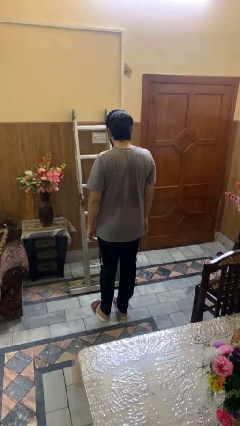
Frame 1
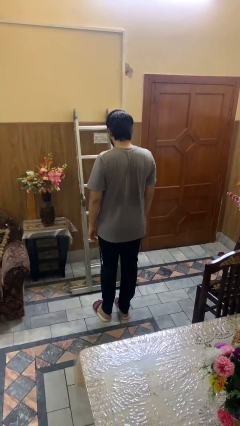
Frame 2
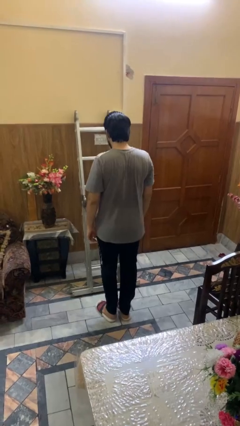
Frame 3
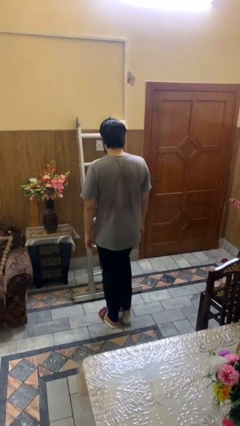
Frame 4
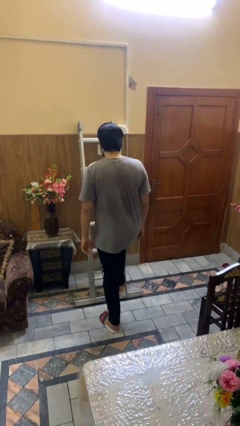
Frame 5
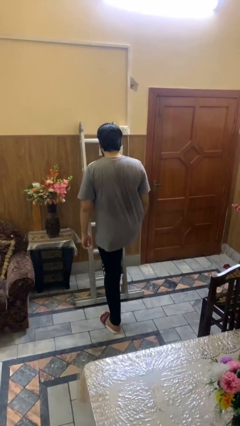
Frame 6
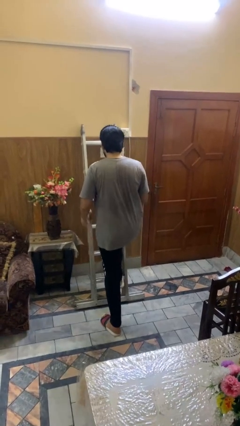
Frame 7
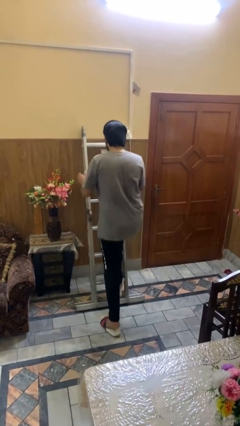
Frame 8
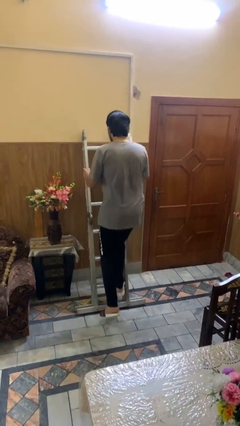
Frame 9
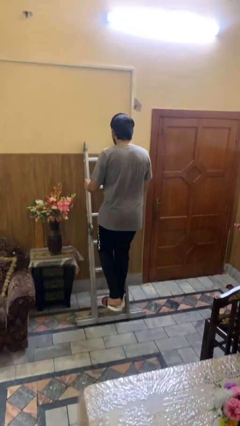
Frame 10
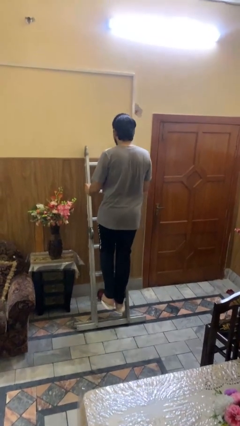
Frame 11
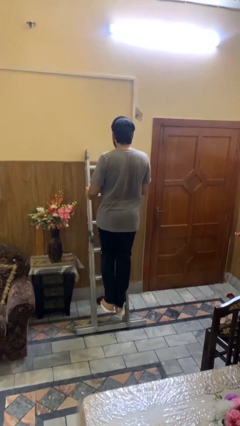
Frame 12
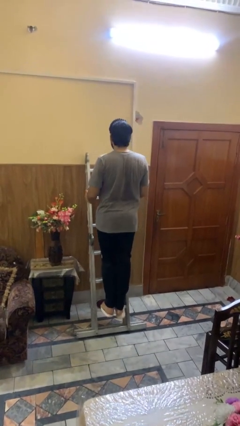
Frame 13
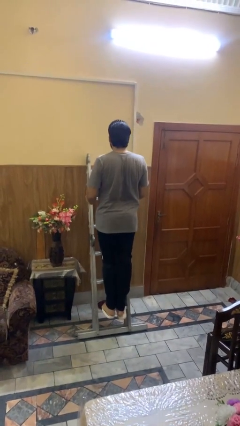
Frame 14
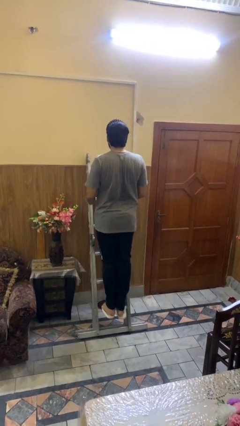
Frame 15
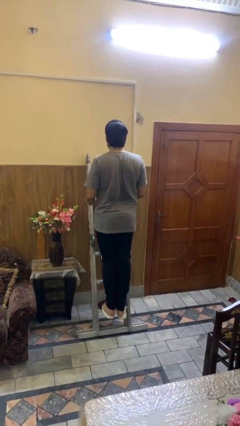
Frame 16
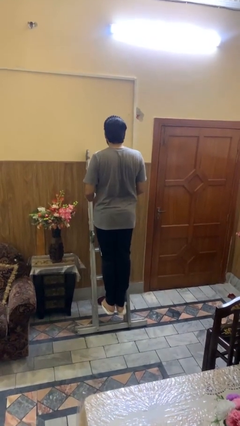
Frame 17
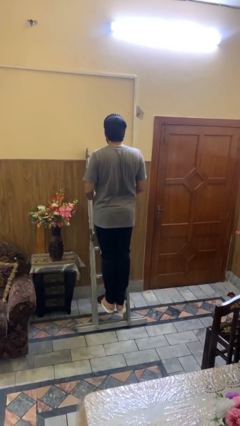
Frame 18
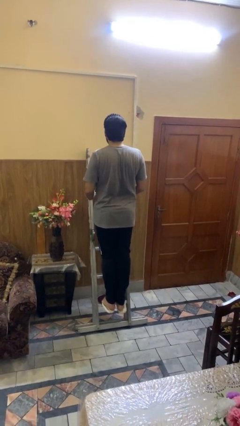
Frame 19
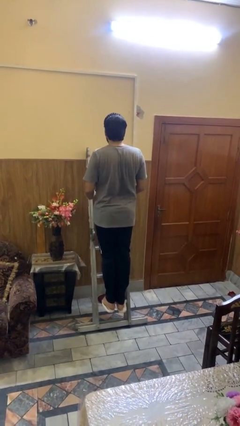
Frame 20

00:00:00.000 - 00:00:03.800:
person climbs up ladder

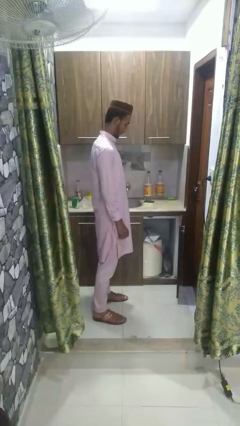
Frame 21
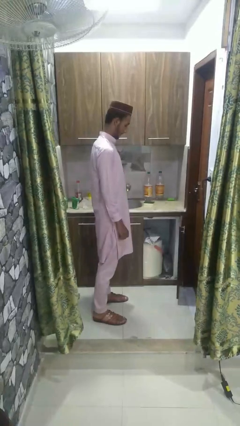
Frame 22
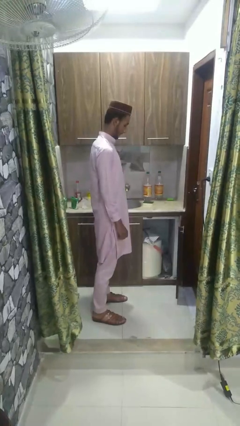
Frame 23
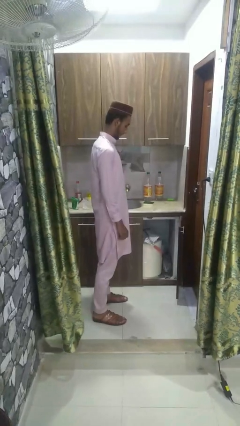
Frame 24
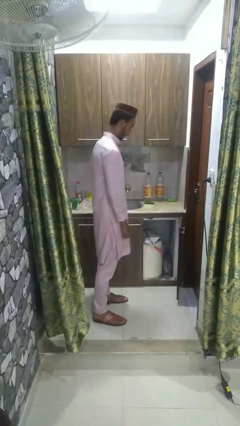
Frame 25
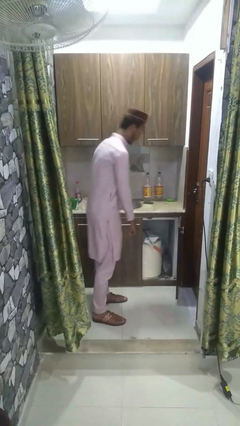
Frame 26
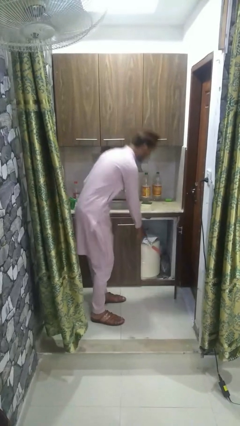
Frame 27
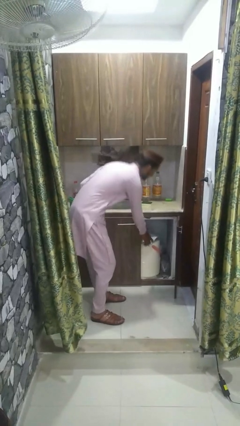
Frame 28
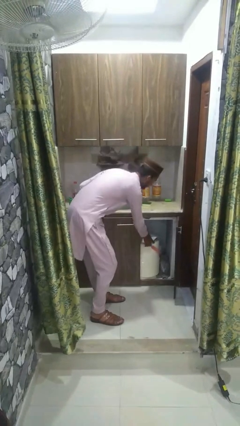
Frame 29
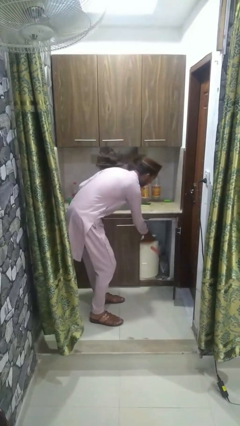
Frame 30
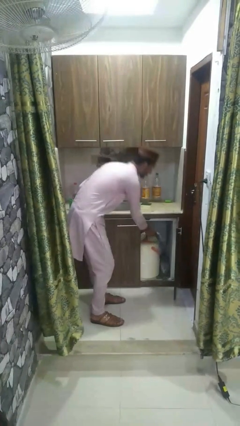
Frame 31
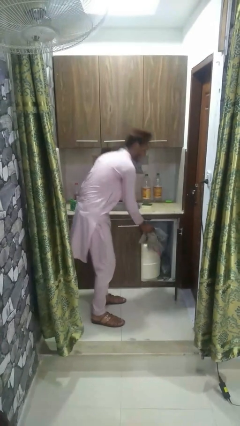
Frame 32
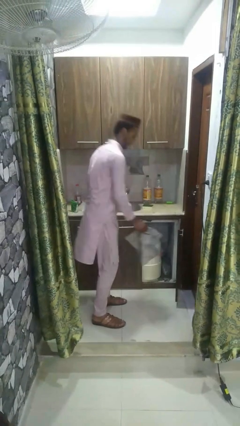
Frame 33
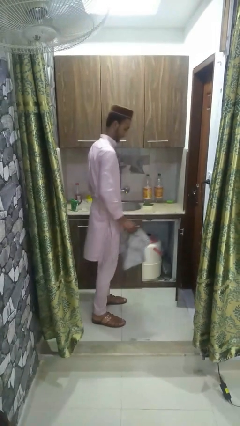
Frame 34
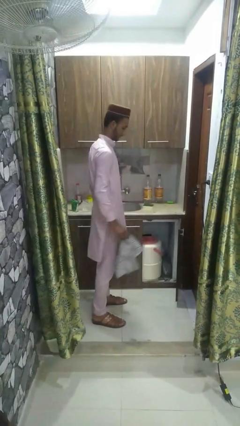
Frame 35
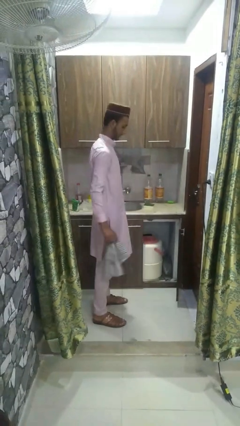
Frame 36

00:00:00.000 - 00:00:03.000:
person unloads clotheswasher

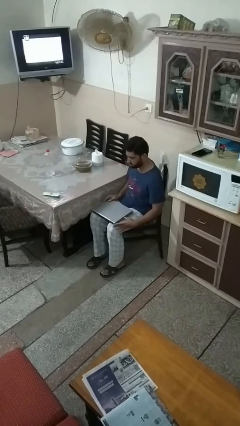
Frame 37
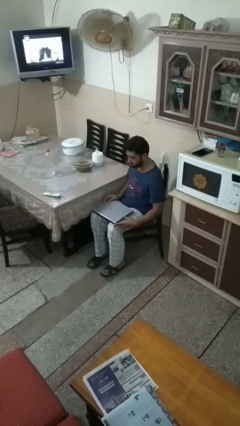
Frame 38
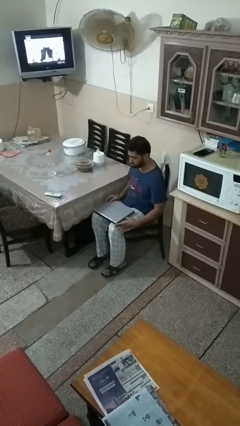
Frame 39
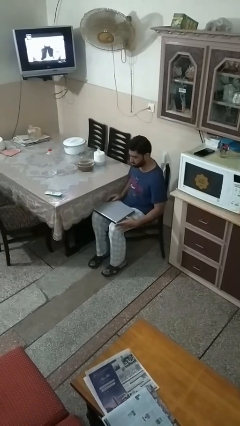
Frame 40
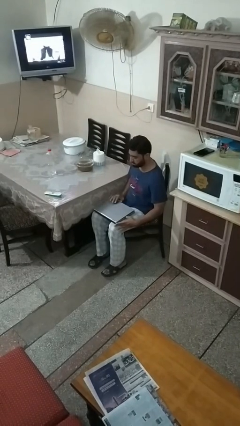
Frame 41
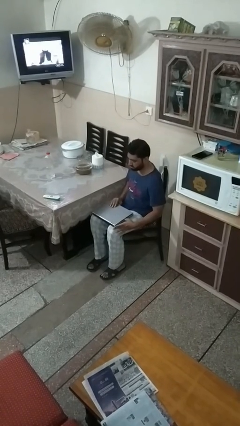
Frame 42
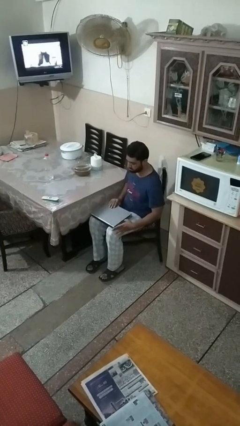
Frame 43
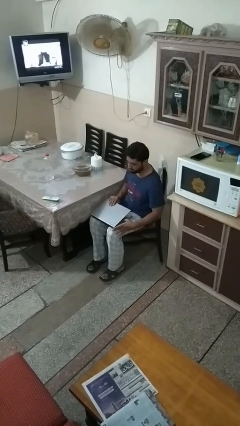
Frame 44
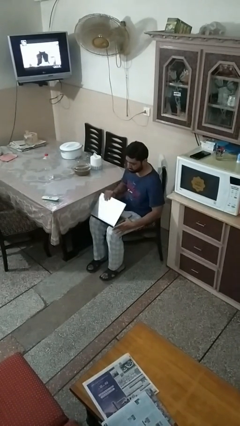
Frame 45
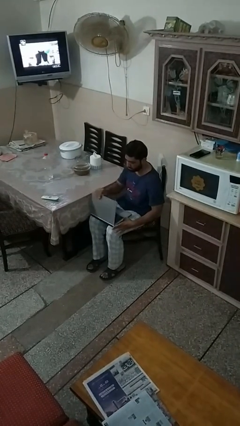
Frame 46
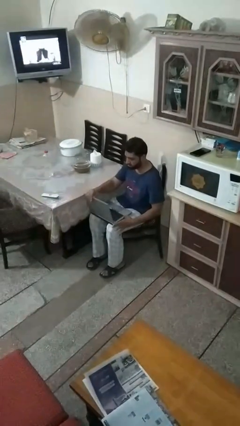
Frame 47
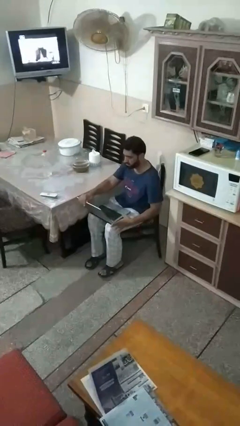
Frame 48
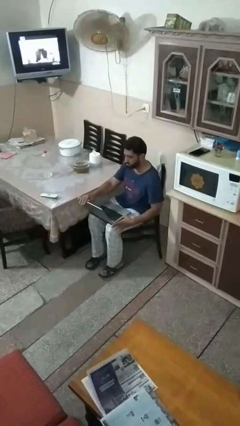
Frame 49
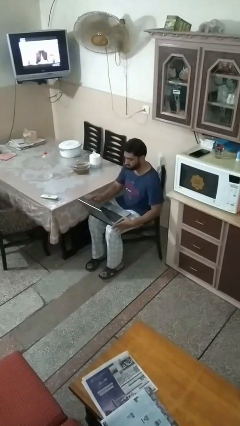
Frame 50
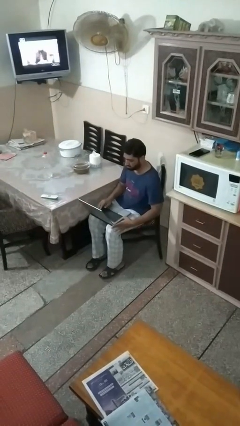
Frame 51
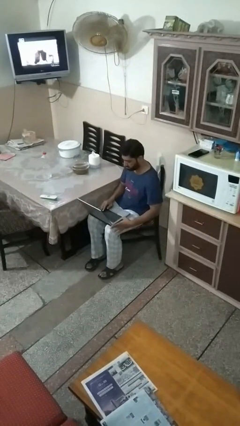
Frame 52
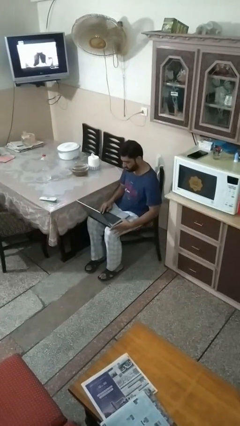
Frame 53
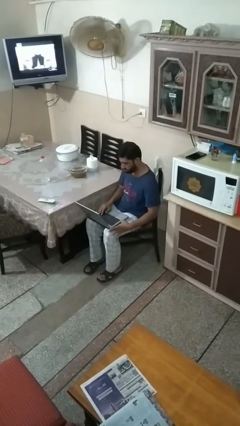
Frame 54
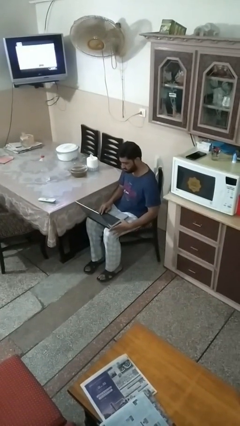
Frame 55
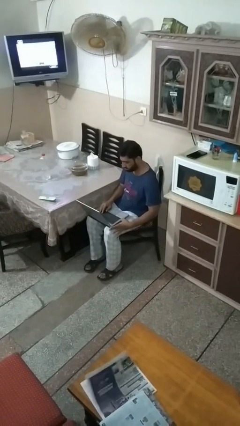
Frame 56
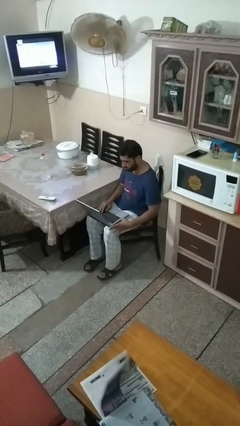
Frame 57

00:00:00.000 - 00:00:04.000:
person opens laptop

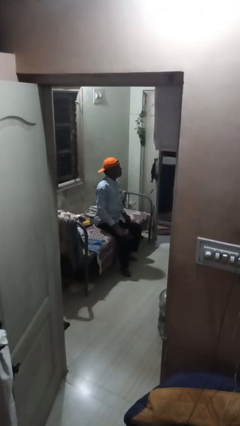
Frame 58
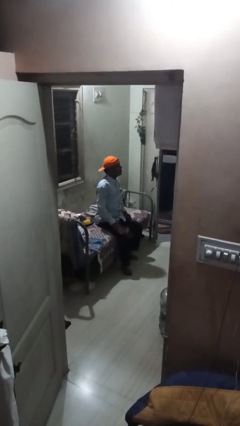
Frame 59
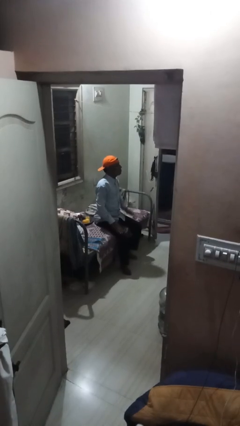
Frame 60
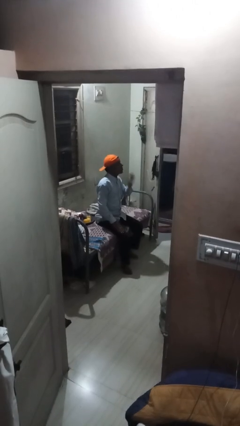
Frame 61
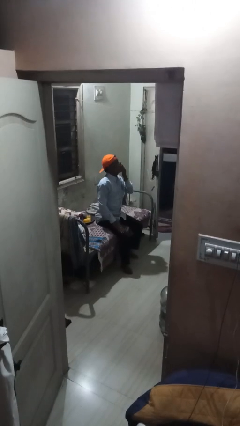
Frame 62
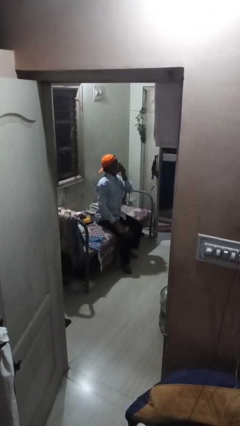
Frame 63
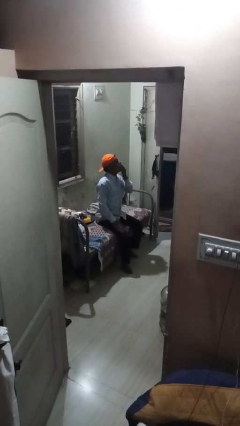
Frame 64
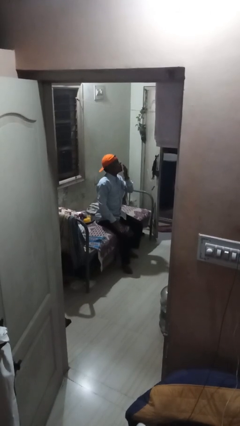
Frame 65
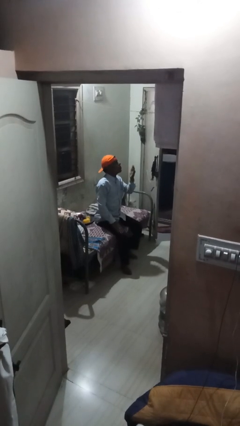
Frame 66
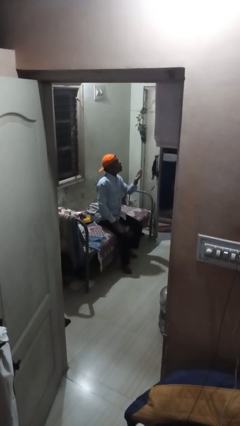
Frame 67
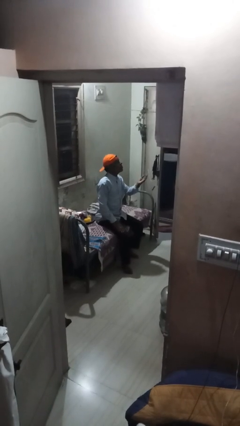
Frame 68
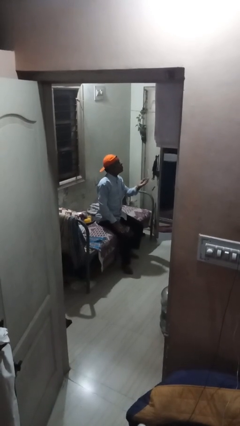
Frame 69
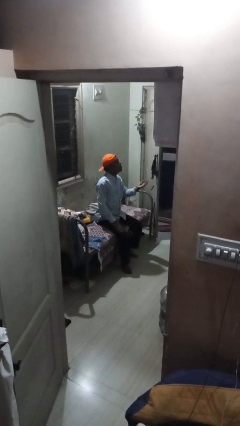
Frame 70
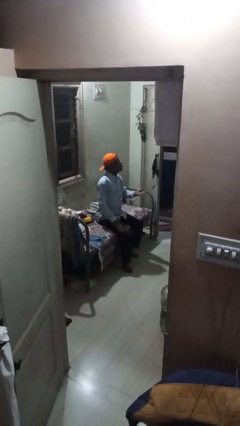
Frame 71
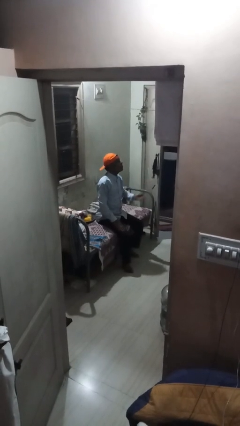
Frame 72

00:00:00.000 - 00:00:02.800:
person gestures blow kiss

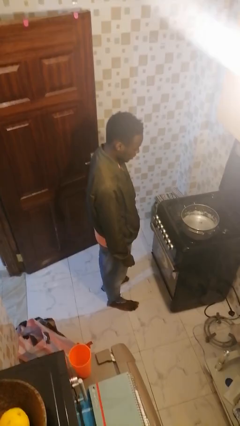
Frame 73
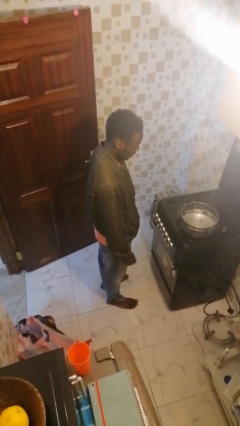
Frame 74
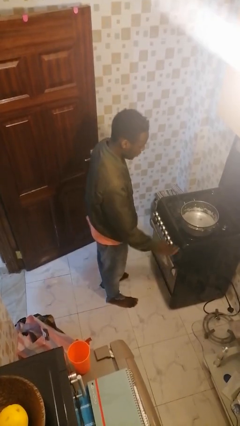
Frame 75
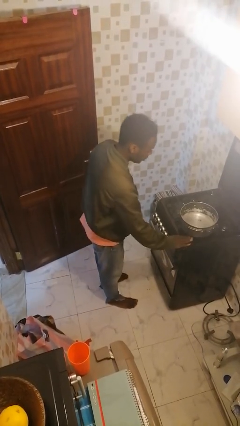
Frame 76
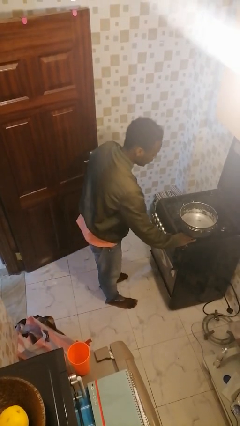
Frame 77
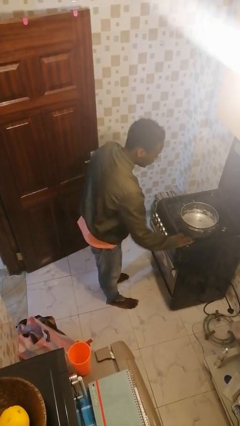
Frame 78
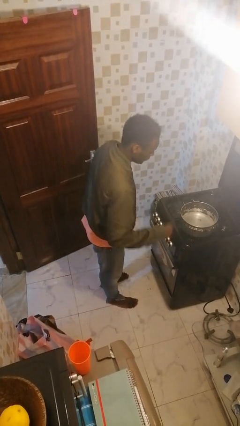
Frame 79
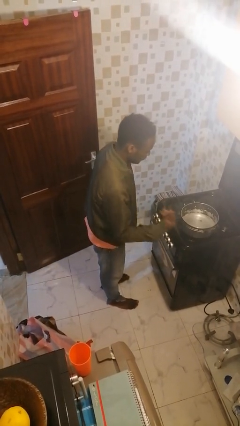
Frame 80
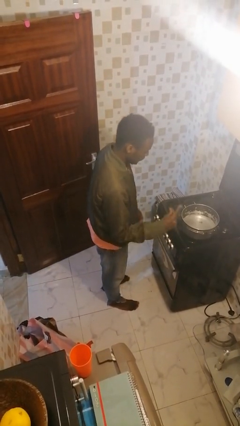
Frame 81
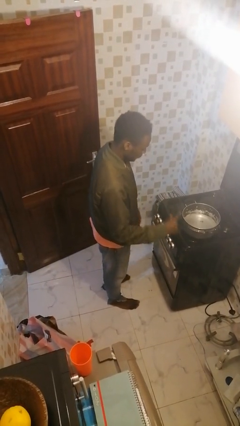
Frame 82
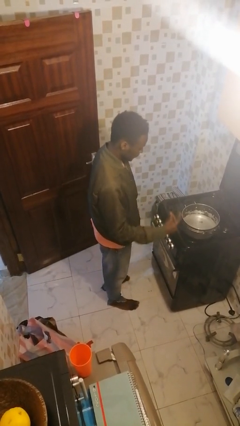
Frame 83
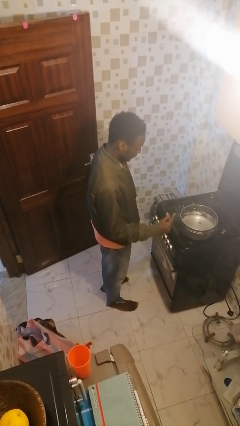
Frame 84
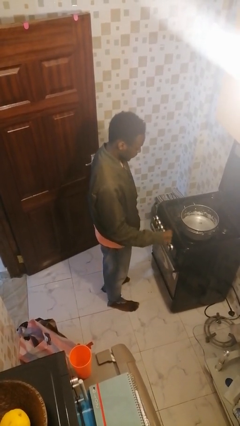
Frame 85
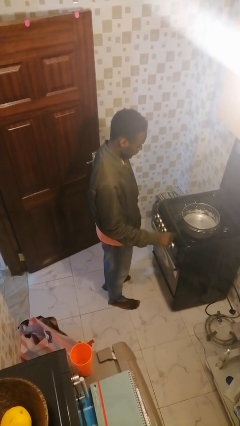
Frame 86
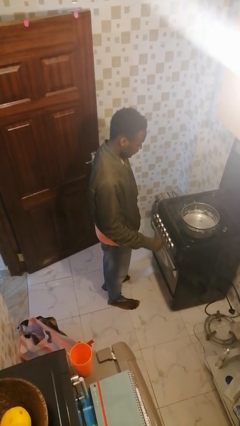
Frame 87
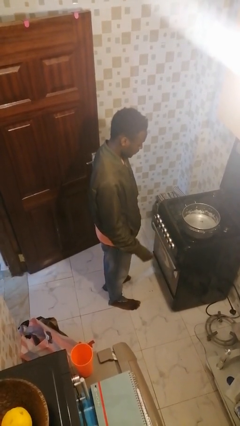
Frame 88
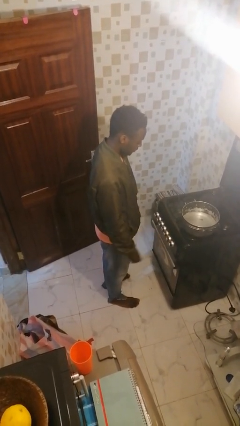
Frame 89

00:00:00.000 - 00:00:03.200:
person burns hand

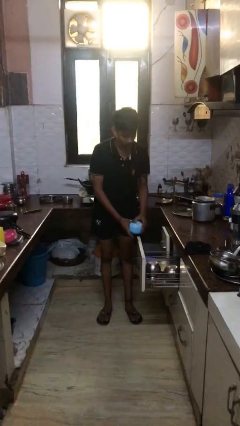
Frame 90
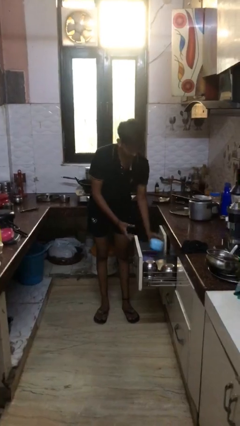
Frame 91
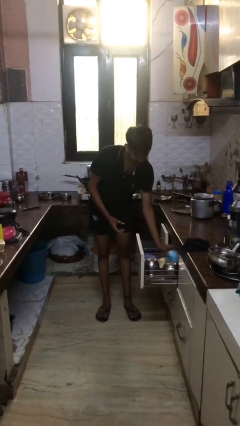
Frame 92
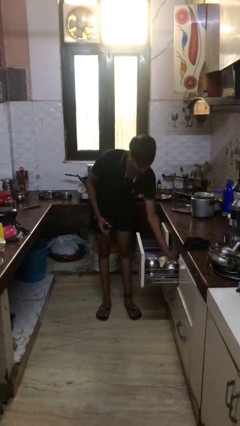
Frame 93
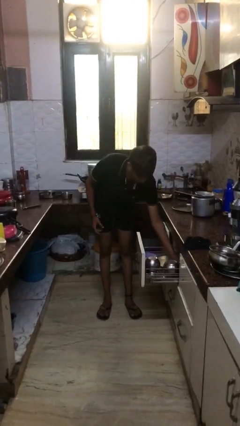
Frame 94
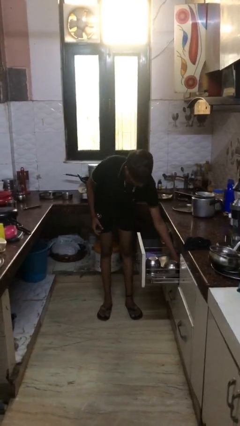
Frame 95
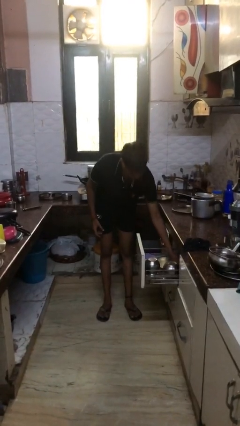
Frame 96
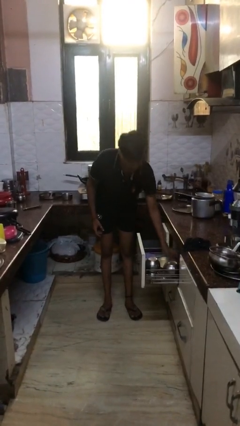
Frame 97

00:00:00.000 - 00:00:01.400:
person puts object into kitchen drawer
